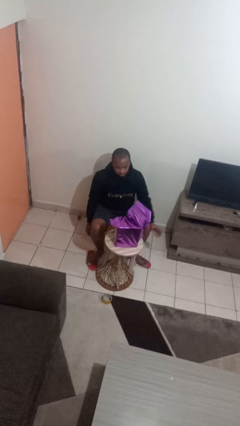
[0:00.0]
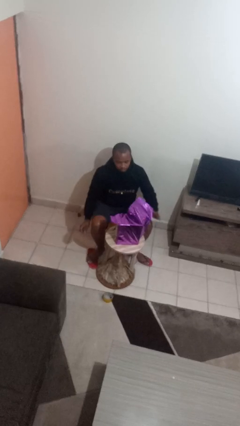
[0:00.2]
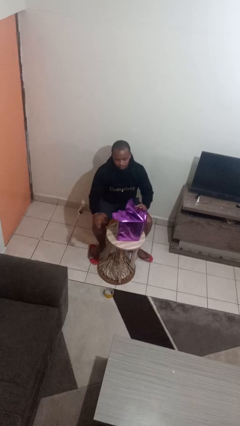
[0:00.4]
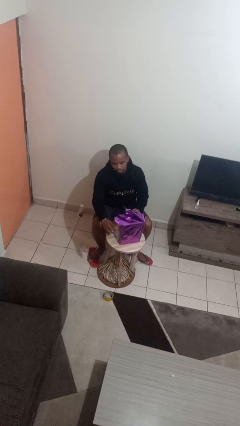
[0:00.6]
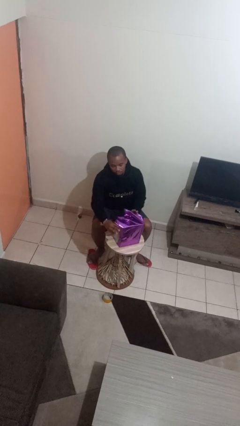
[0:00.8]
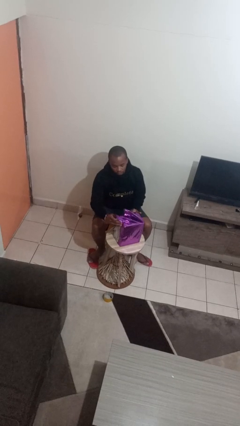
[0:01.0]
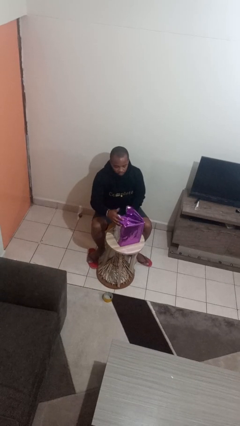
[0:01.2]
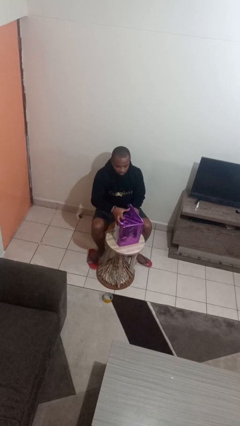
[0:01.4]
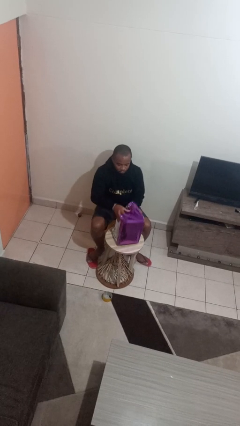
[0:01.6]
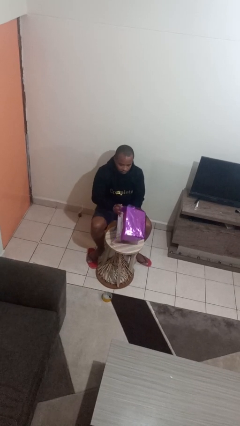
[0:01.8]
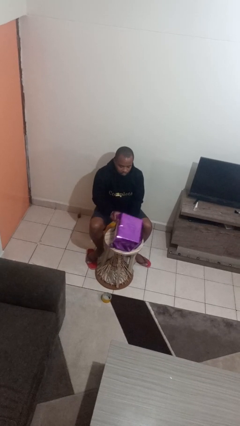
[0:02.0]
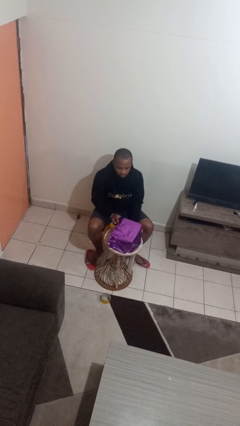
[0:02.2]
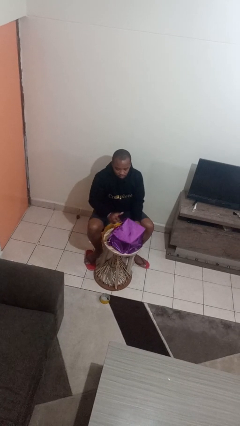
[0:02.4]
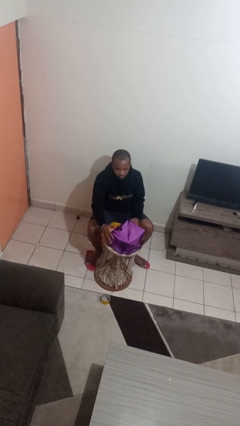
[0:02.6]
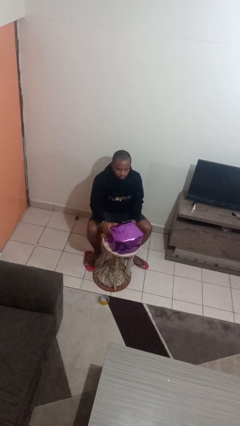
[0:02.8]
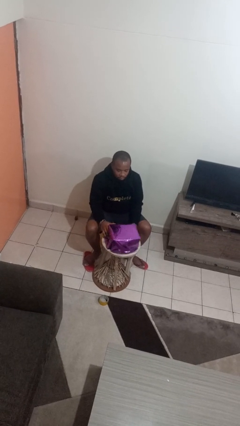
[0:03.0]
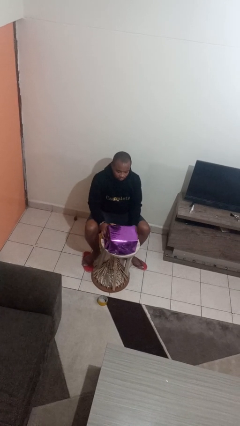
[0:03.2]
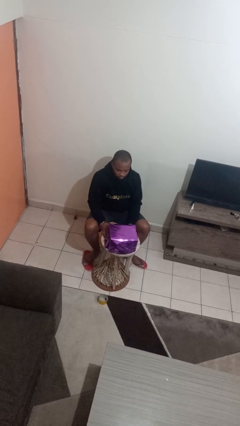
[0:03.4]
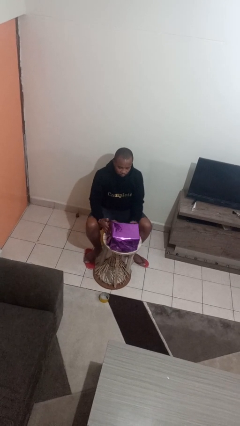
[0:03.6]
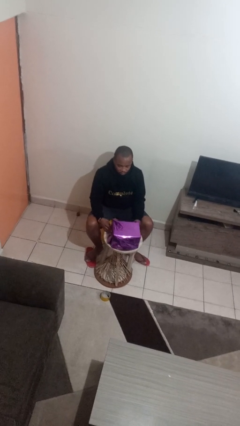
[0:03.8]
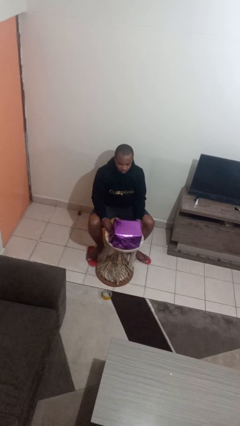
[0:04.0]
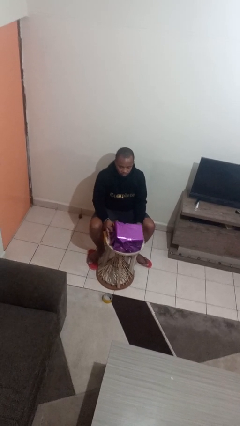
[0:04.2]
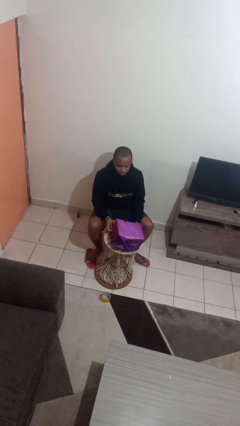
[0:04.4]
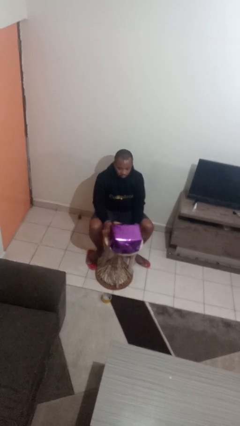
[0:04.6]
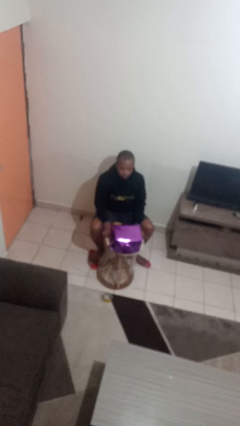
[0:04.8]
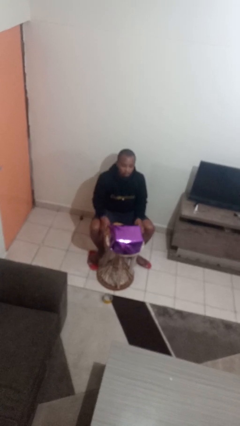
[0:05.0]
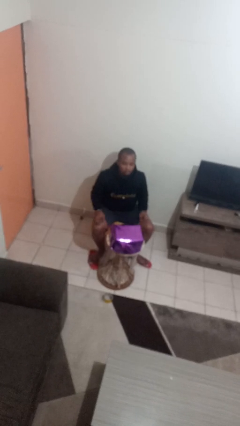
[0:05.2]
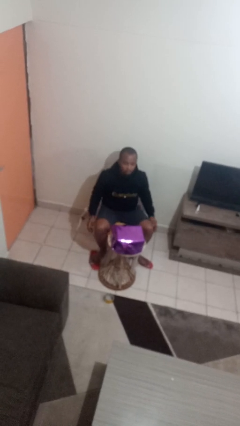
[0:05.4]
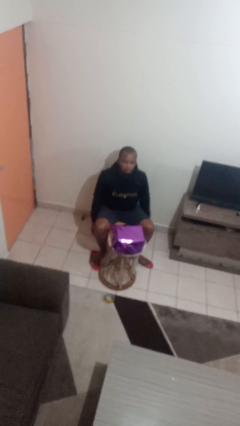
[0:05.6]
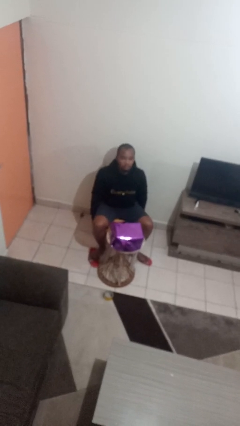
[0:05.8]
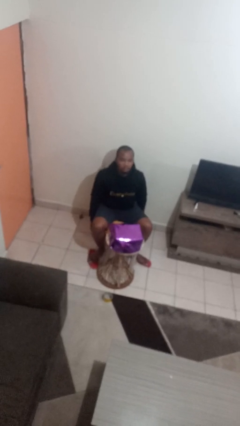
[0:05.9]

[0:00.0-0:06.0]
person wraps box

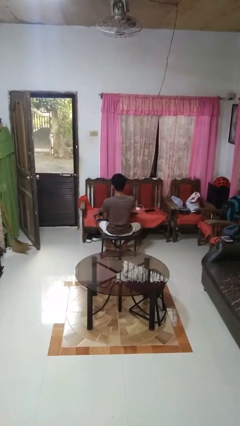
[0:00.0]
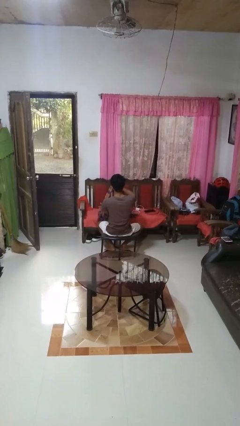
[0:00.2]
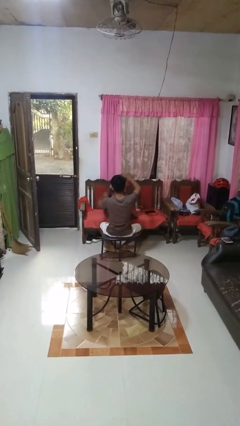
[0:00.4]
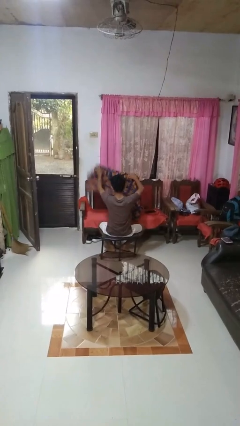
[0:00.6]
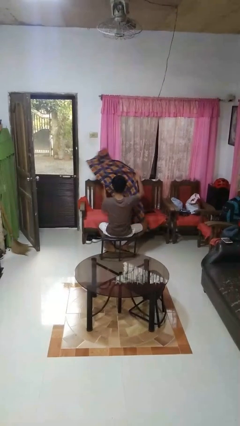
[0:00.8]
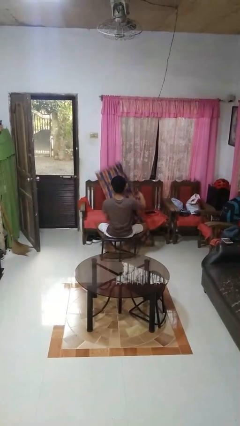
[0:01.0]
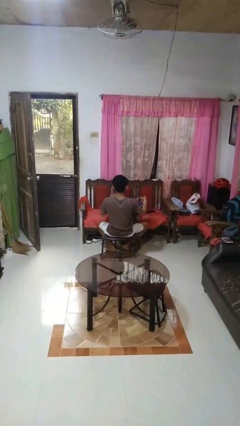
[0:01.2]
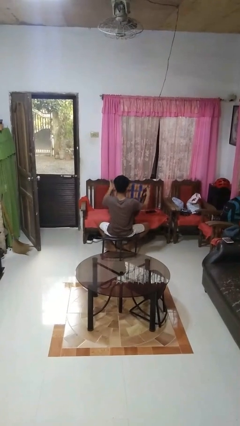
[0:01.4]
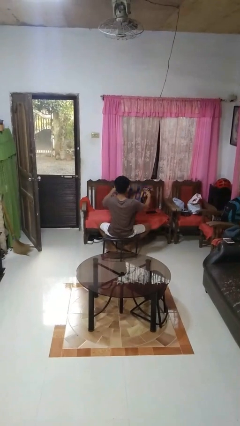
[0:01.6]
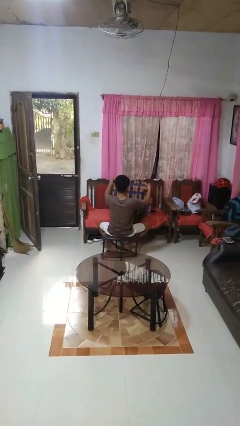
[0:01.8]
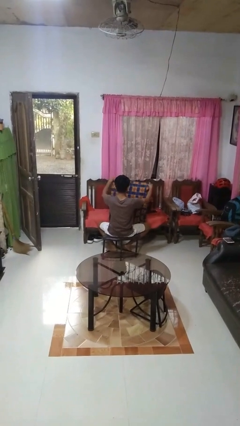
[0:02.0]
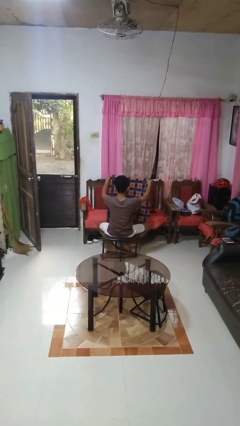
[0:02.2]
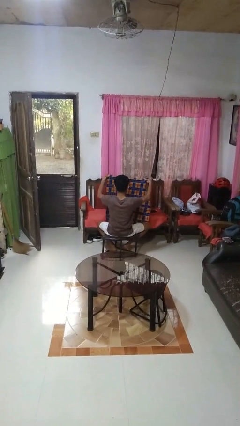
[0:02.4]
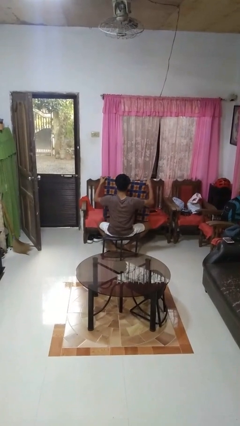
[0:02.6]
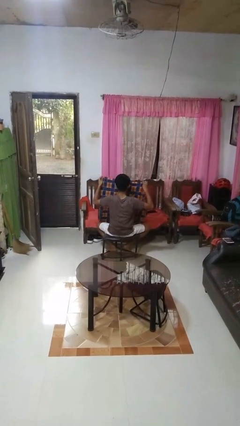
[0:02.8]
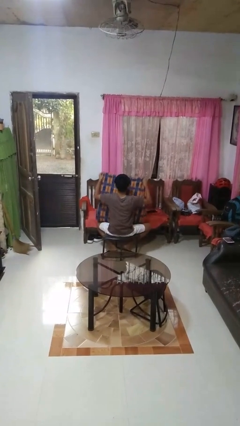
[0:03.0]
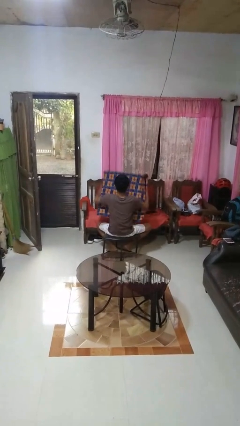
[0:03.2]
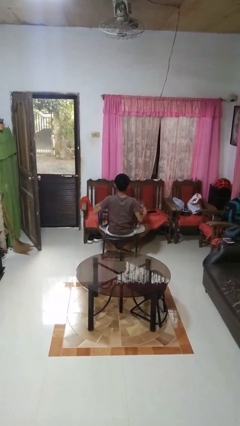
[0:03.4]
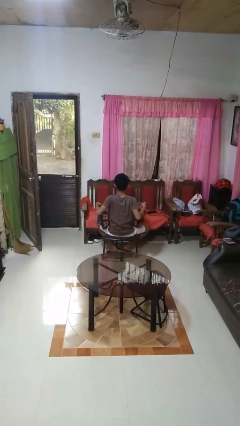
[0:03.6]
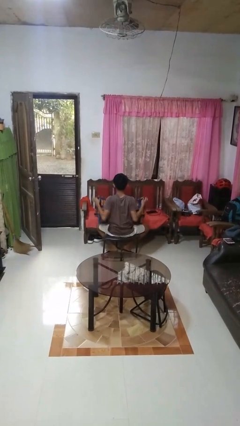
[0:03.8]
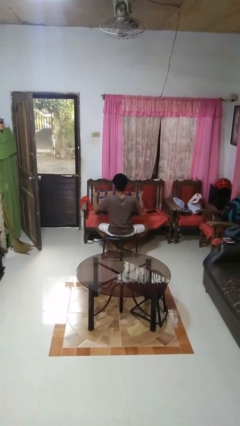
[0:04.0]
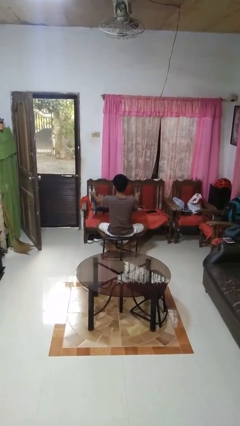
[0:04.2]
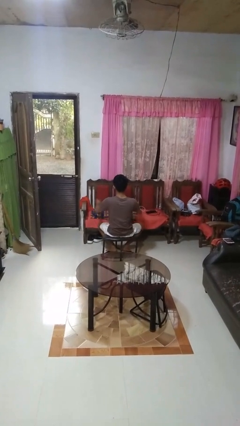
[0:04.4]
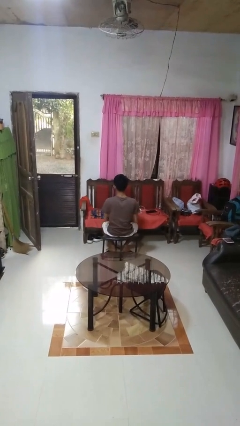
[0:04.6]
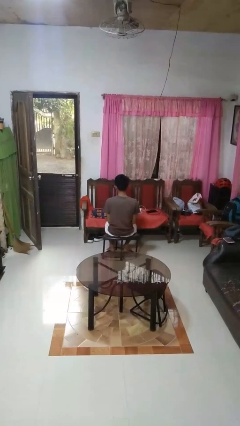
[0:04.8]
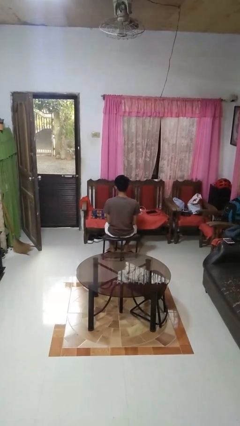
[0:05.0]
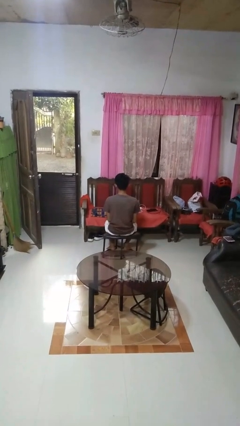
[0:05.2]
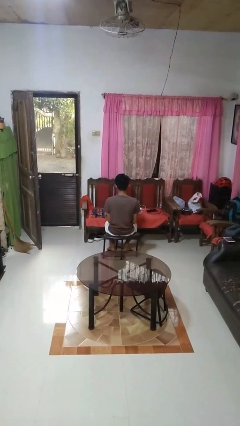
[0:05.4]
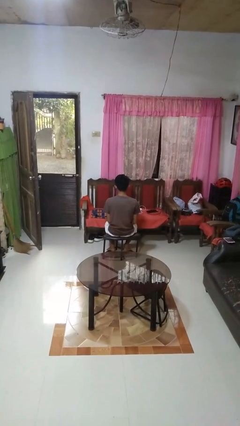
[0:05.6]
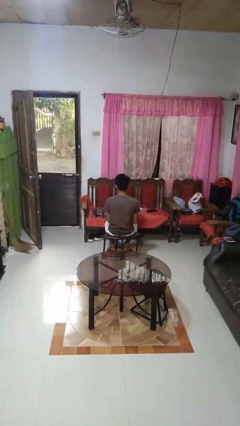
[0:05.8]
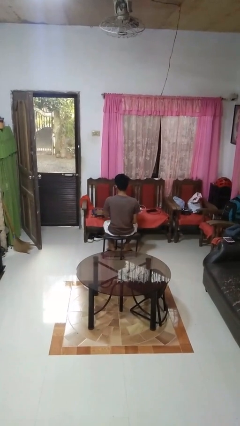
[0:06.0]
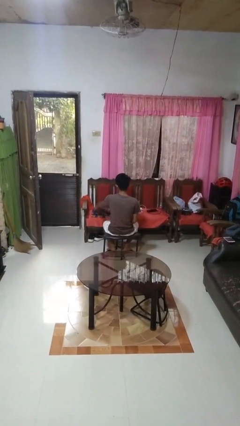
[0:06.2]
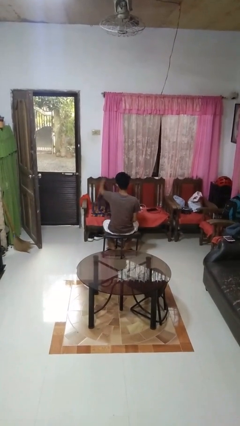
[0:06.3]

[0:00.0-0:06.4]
person folds blanket

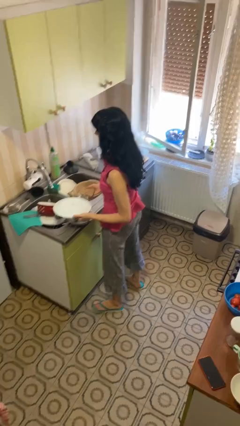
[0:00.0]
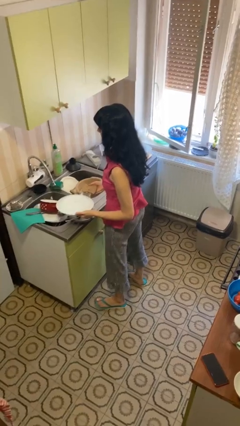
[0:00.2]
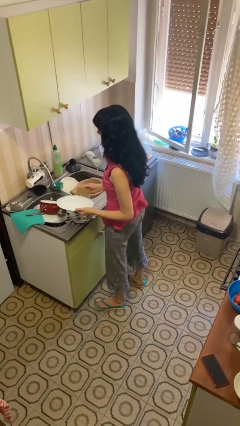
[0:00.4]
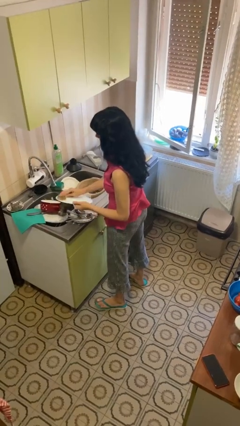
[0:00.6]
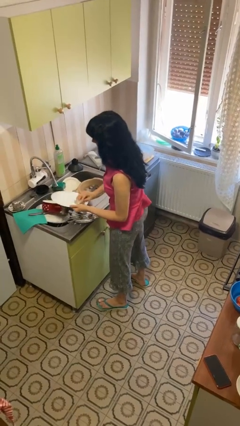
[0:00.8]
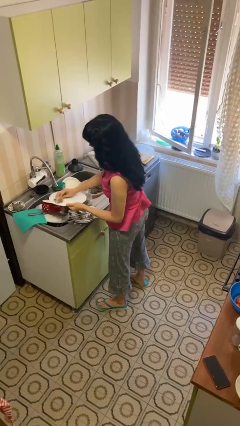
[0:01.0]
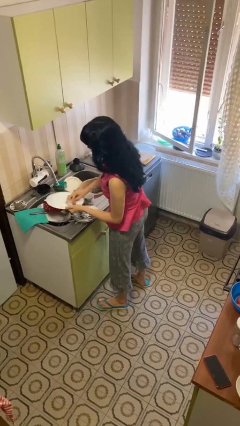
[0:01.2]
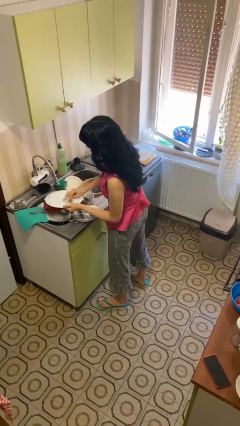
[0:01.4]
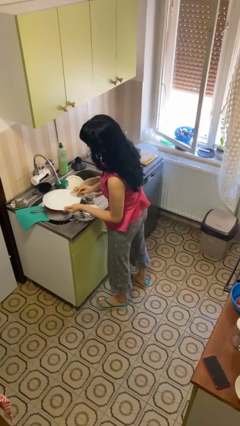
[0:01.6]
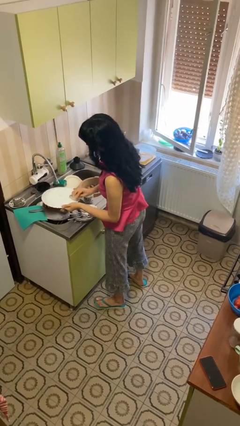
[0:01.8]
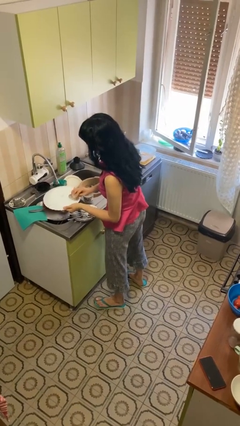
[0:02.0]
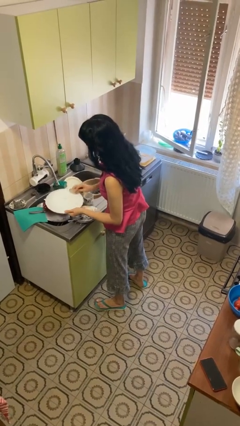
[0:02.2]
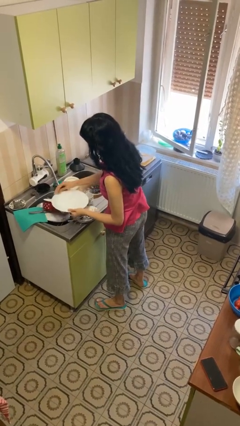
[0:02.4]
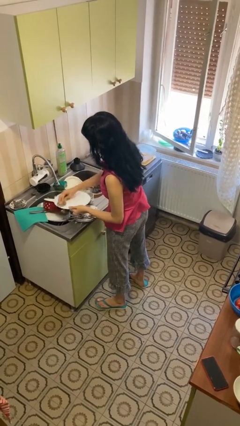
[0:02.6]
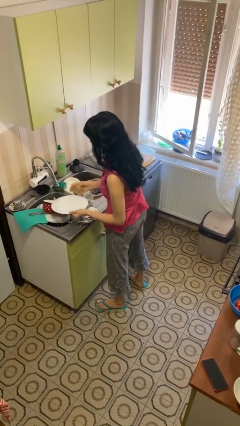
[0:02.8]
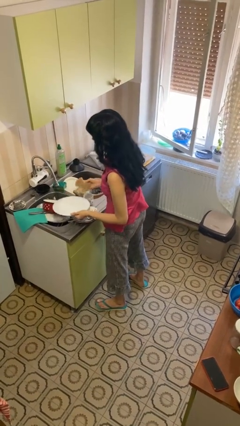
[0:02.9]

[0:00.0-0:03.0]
person washes dish

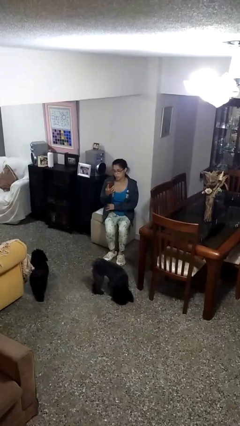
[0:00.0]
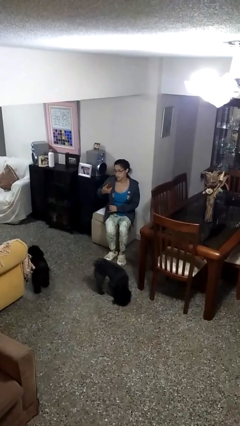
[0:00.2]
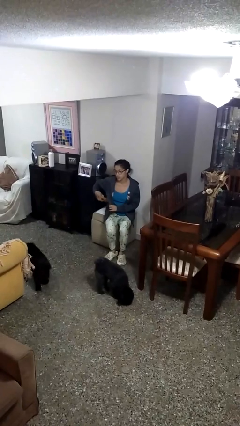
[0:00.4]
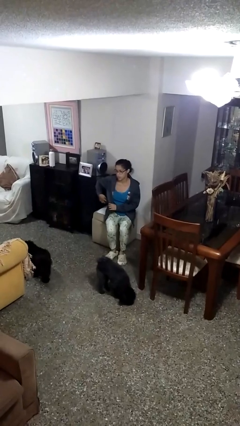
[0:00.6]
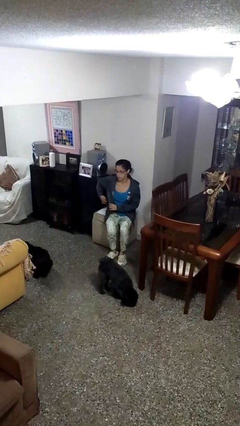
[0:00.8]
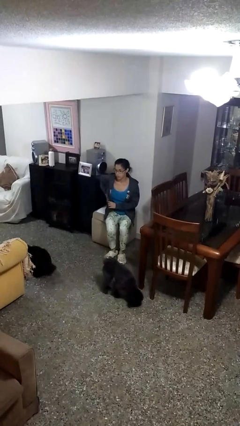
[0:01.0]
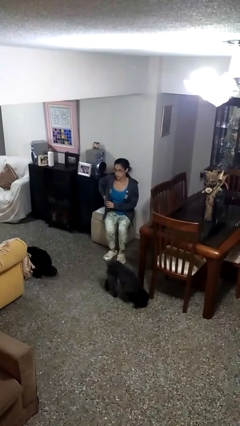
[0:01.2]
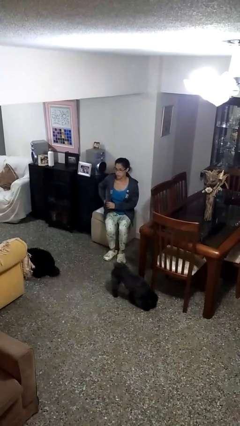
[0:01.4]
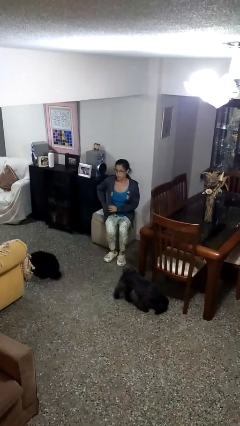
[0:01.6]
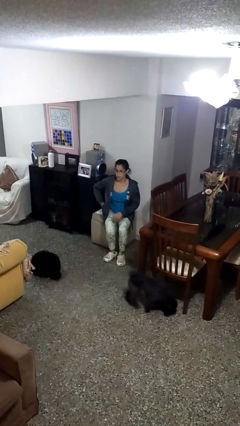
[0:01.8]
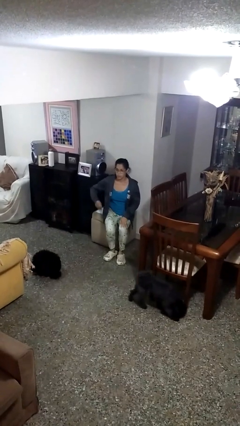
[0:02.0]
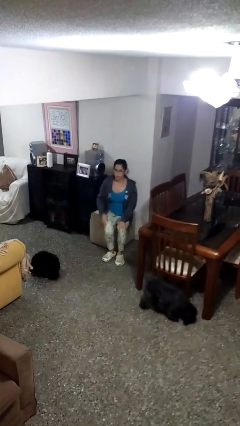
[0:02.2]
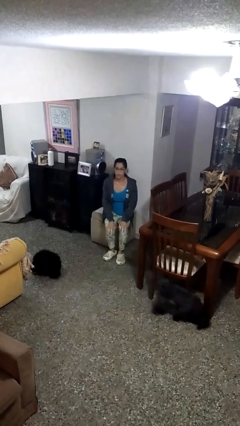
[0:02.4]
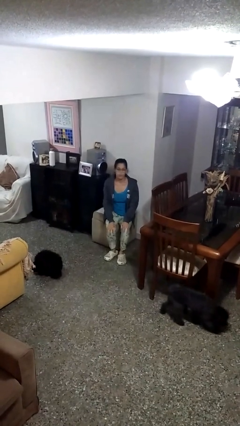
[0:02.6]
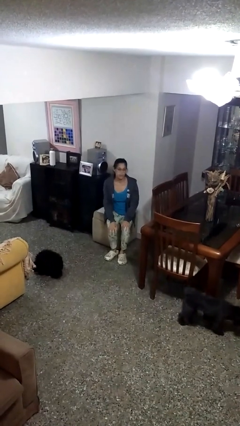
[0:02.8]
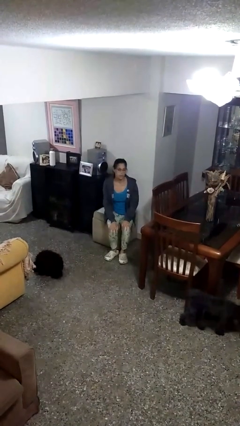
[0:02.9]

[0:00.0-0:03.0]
person puts phone into pocket
